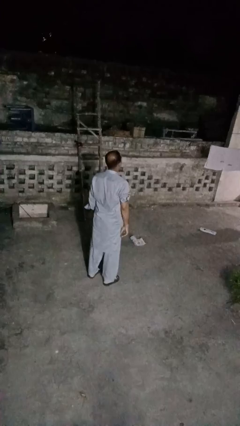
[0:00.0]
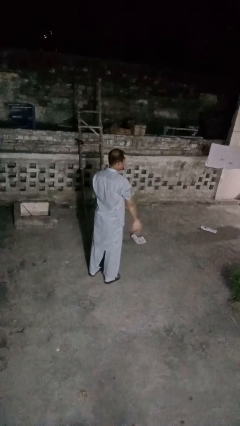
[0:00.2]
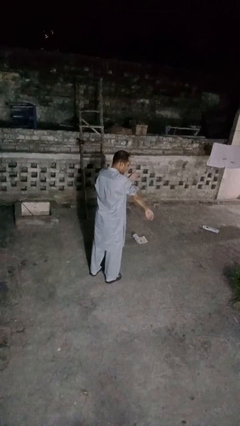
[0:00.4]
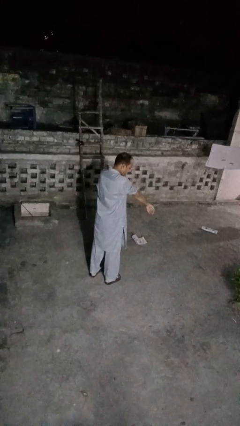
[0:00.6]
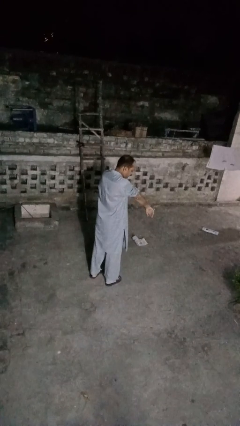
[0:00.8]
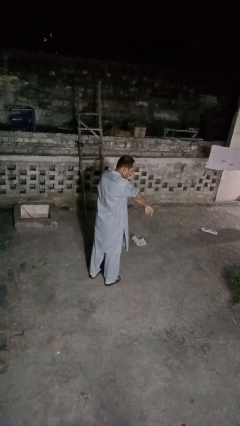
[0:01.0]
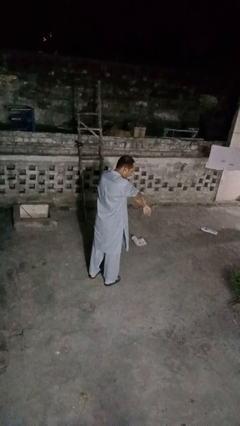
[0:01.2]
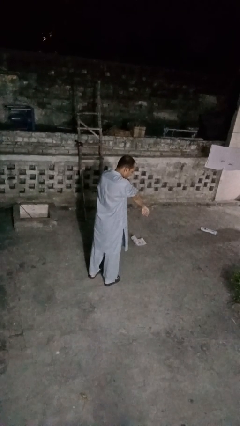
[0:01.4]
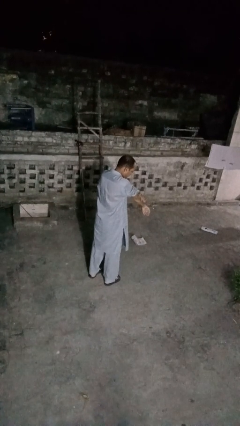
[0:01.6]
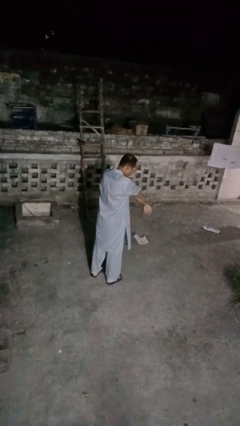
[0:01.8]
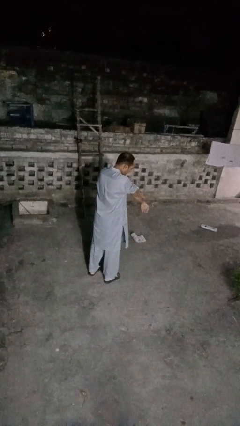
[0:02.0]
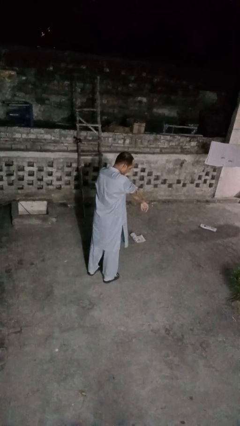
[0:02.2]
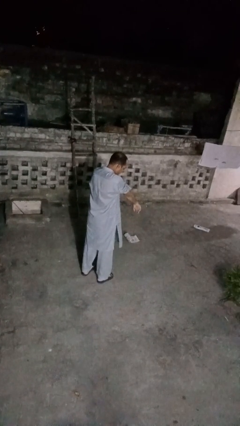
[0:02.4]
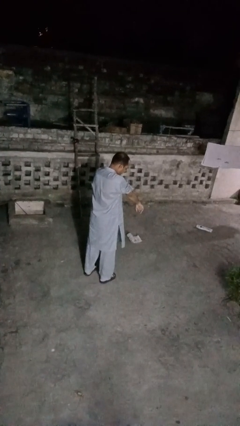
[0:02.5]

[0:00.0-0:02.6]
person swats bug

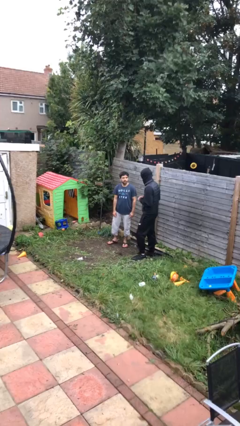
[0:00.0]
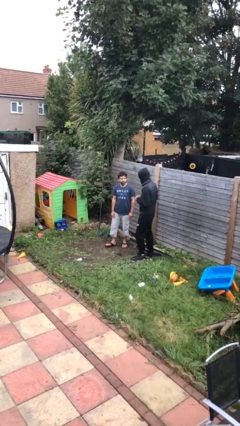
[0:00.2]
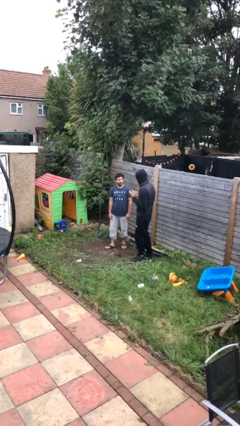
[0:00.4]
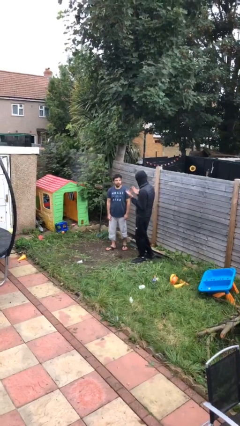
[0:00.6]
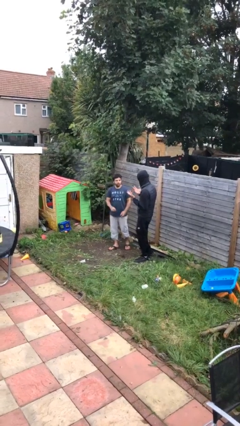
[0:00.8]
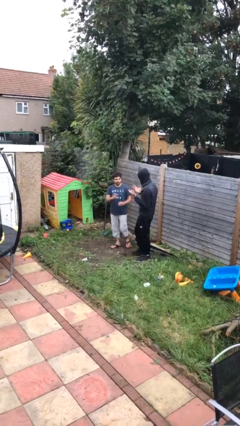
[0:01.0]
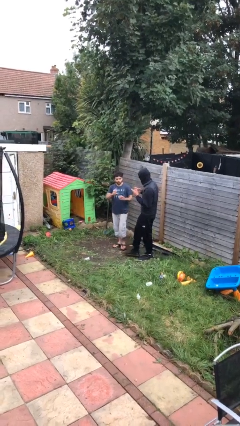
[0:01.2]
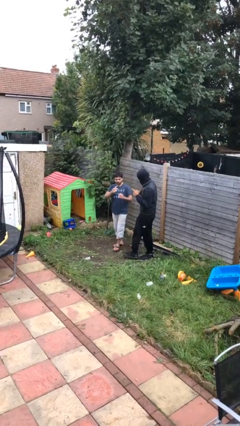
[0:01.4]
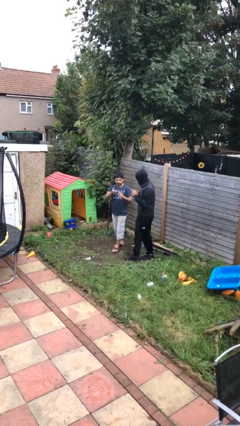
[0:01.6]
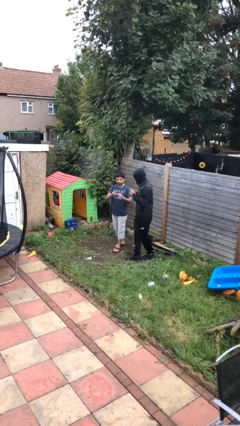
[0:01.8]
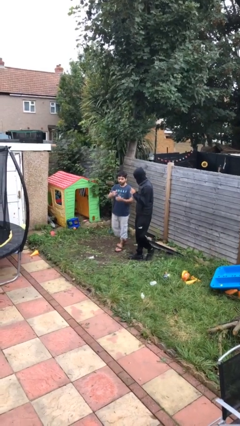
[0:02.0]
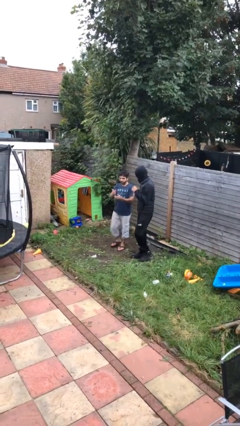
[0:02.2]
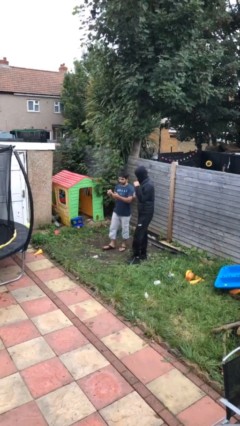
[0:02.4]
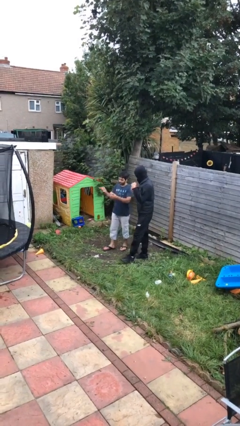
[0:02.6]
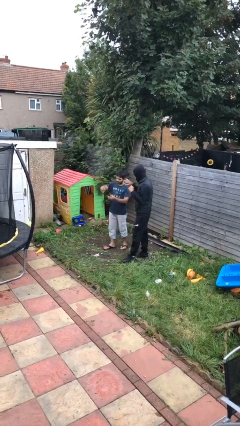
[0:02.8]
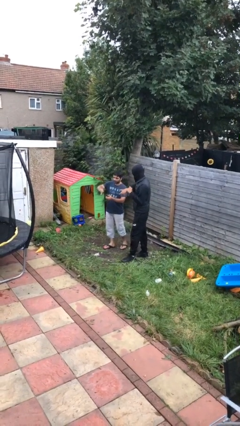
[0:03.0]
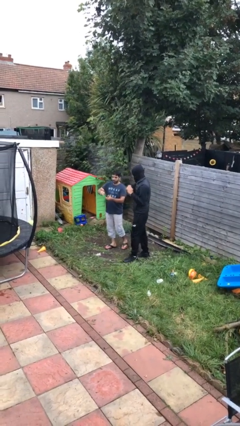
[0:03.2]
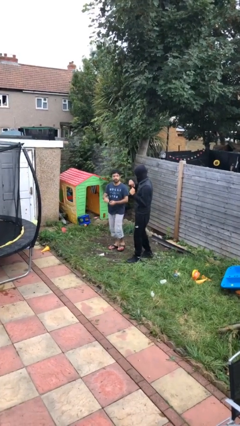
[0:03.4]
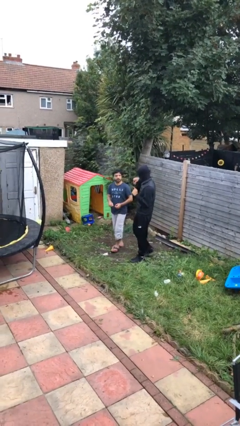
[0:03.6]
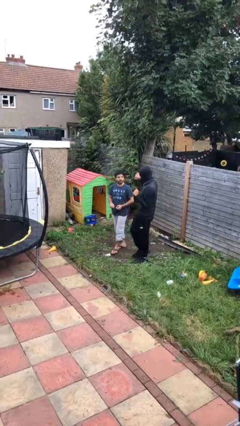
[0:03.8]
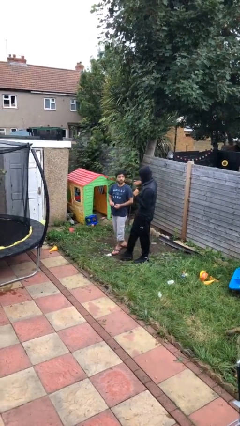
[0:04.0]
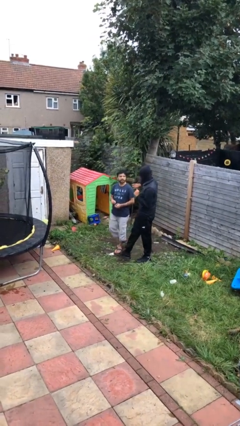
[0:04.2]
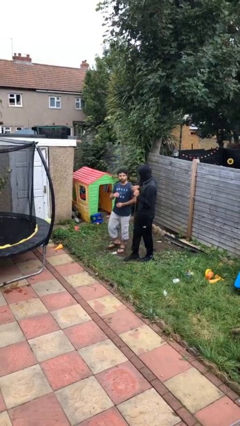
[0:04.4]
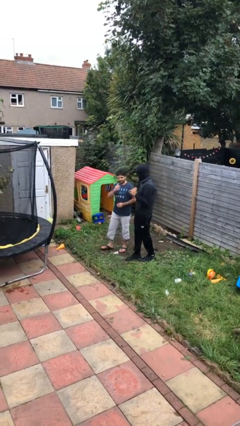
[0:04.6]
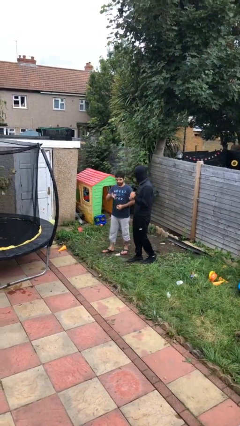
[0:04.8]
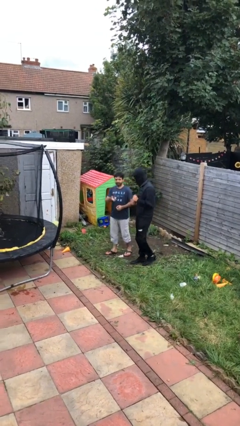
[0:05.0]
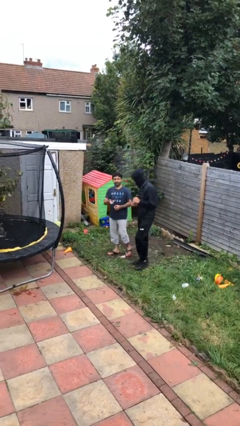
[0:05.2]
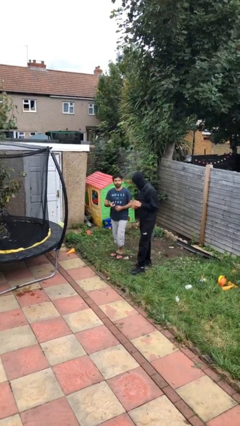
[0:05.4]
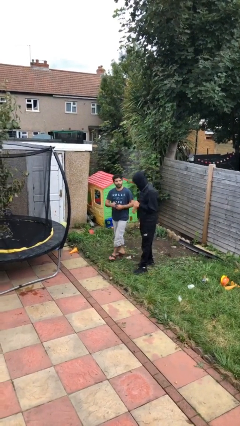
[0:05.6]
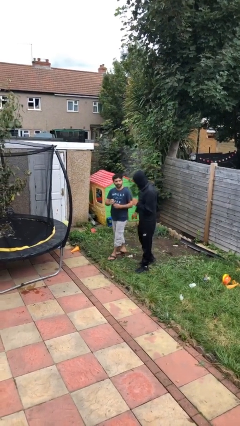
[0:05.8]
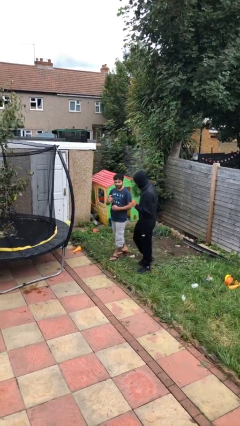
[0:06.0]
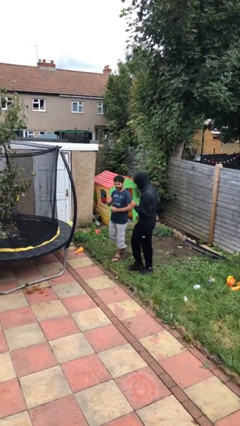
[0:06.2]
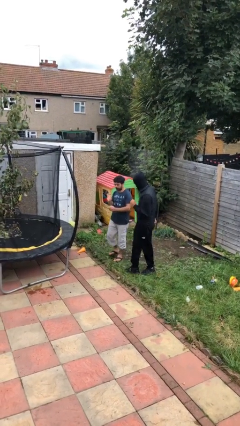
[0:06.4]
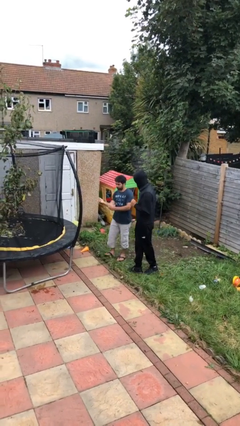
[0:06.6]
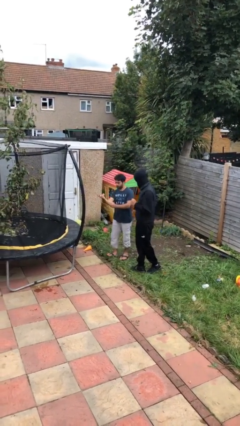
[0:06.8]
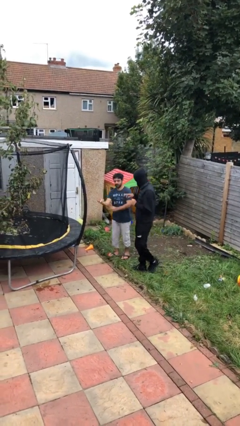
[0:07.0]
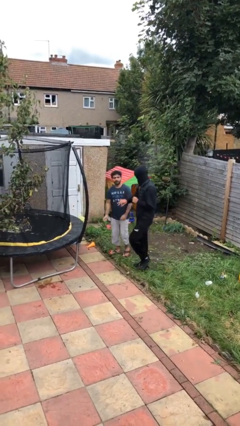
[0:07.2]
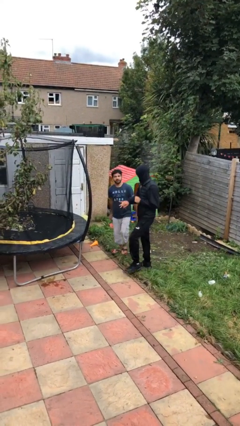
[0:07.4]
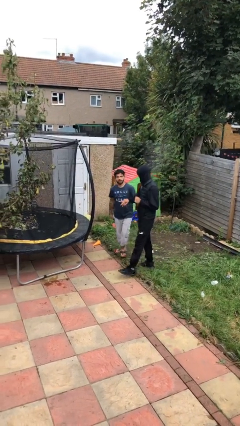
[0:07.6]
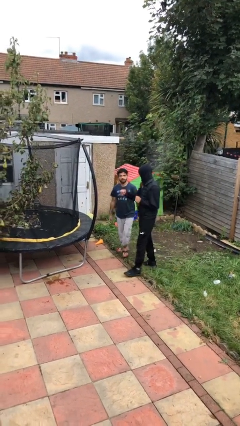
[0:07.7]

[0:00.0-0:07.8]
person talks to person

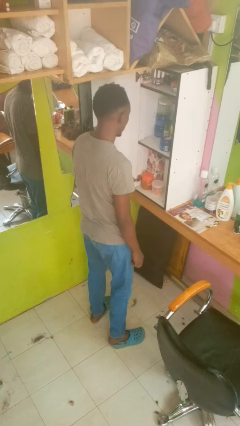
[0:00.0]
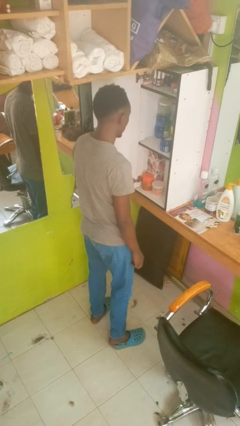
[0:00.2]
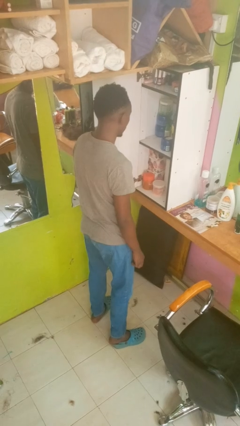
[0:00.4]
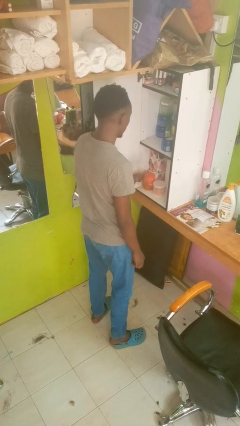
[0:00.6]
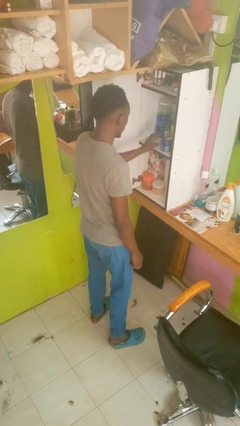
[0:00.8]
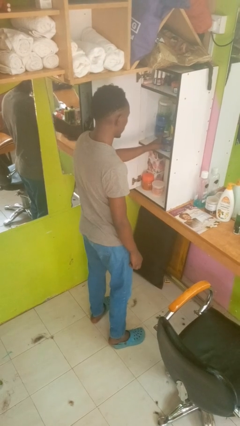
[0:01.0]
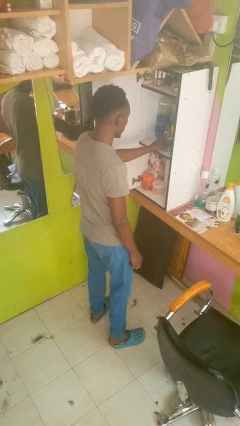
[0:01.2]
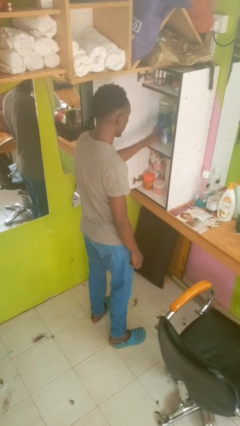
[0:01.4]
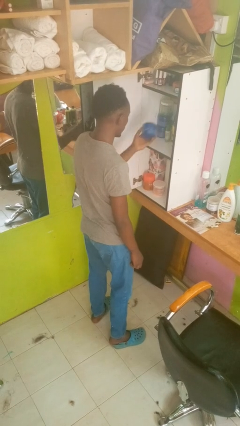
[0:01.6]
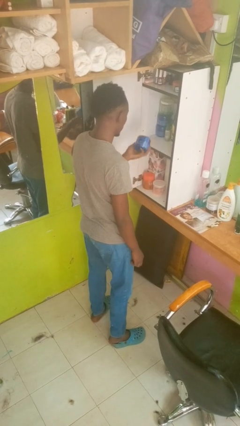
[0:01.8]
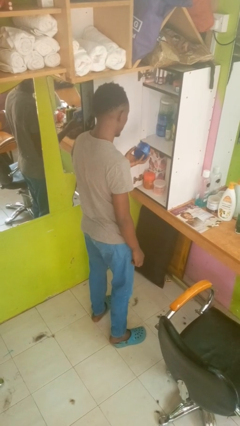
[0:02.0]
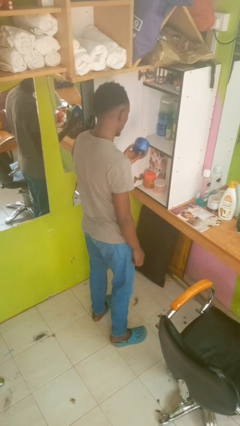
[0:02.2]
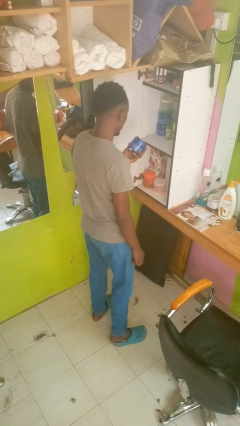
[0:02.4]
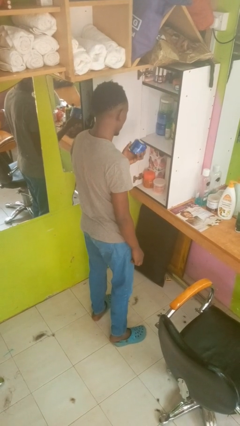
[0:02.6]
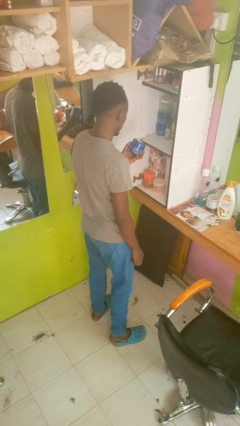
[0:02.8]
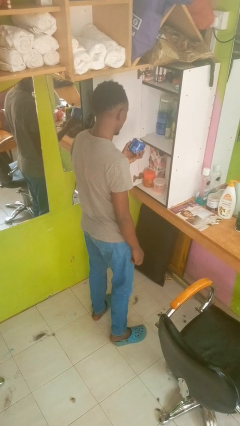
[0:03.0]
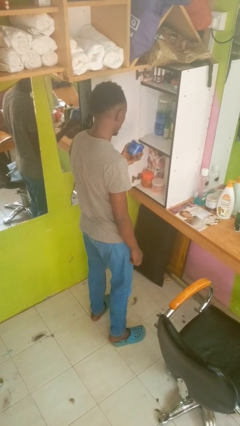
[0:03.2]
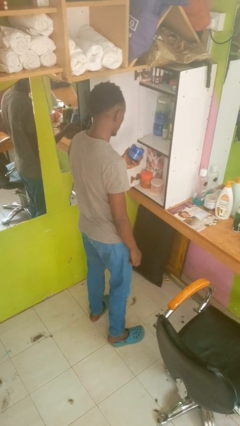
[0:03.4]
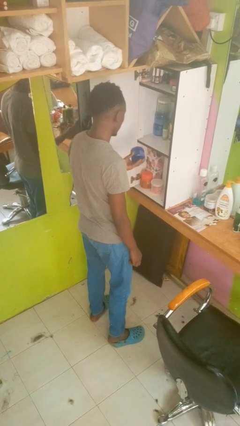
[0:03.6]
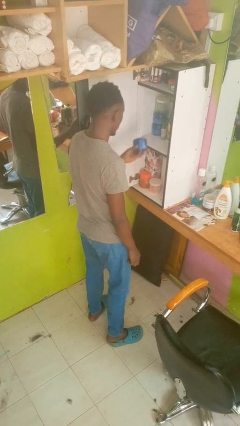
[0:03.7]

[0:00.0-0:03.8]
person picks up object from cabinet

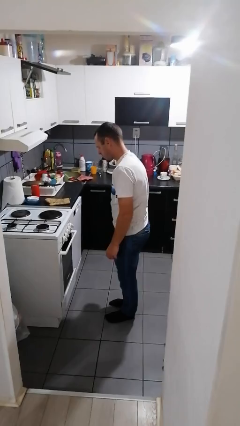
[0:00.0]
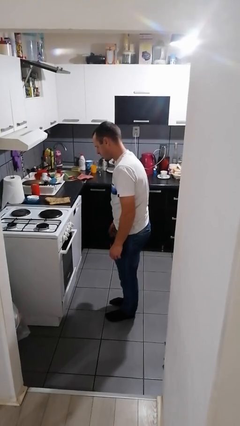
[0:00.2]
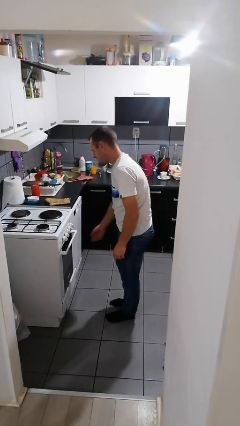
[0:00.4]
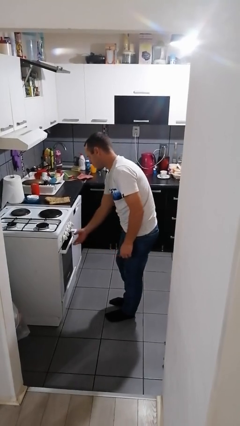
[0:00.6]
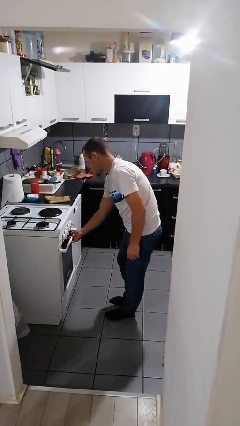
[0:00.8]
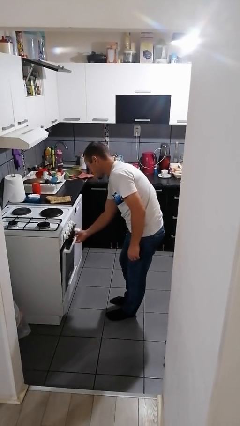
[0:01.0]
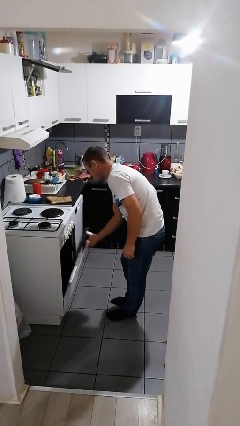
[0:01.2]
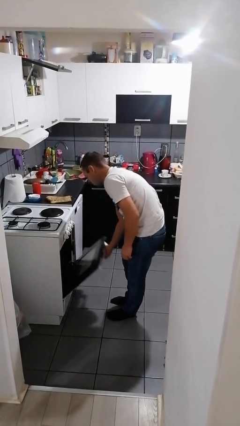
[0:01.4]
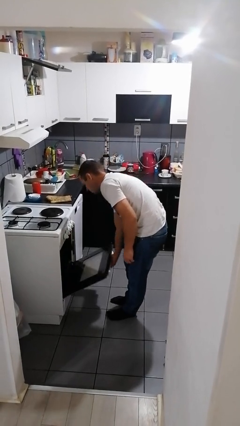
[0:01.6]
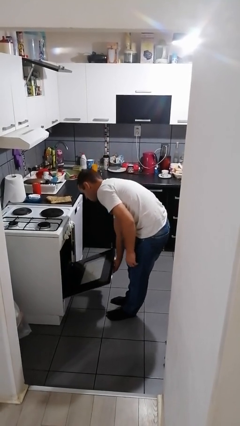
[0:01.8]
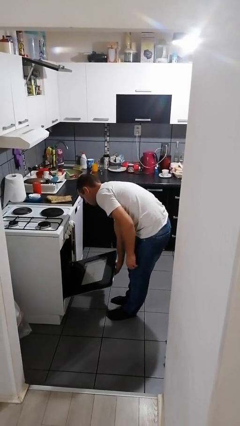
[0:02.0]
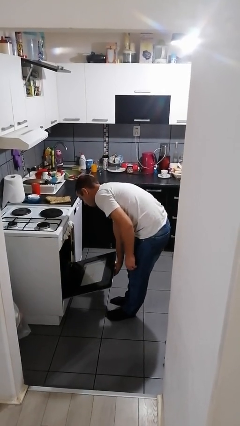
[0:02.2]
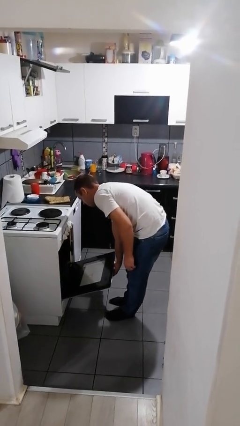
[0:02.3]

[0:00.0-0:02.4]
person opens oven door

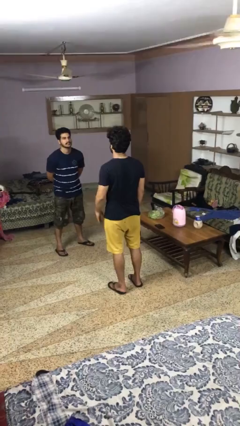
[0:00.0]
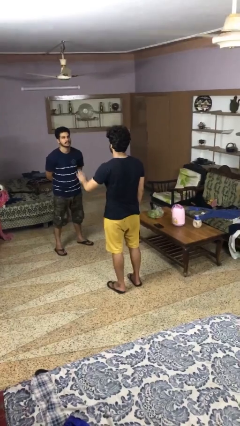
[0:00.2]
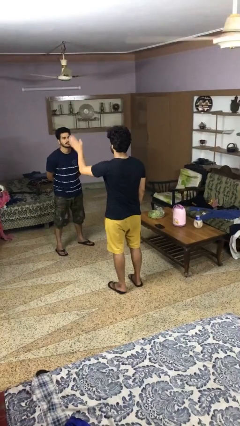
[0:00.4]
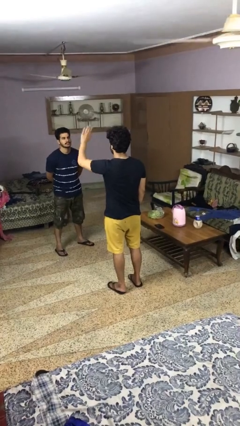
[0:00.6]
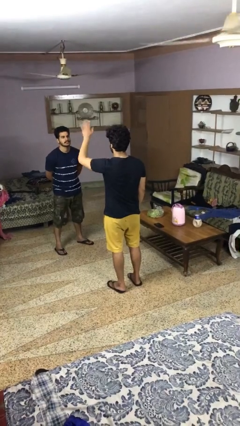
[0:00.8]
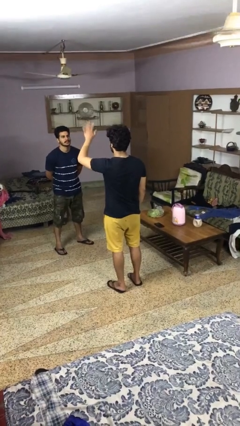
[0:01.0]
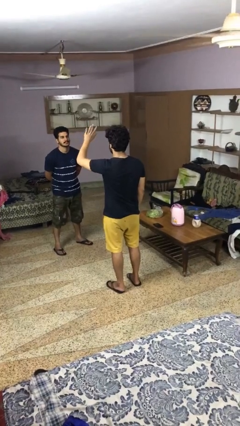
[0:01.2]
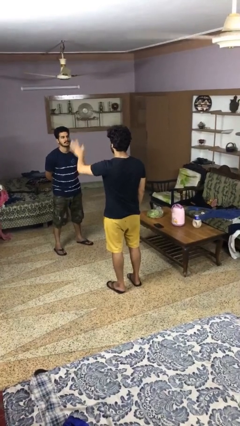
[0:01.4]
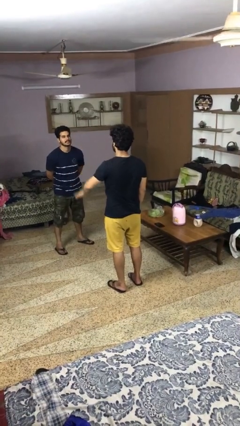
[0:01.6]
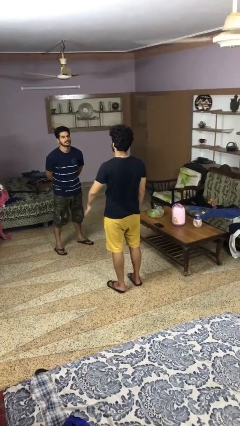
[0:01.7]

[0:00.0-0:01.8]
person waves at person
